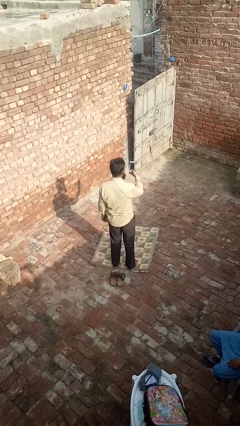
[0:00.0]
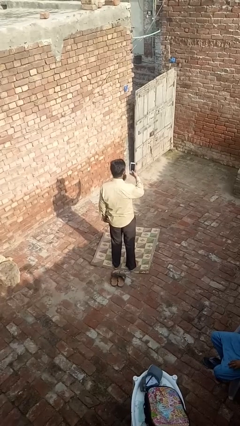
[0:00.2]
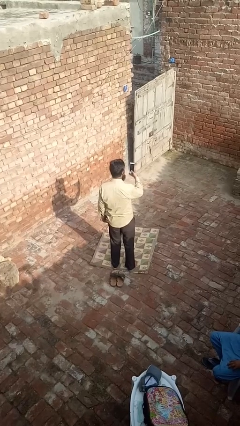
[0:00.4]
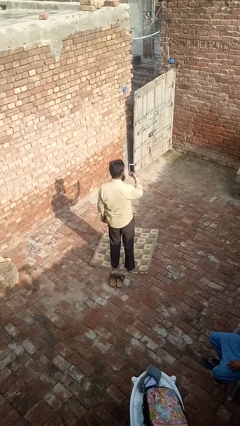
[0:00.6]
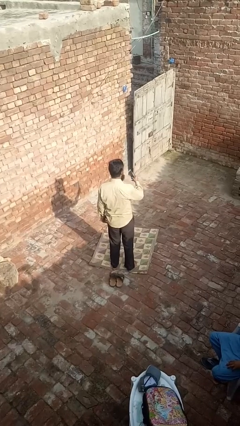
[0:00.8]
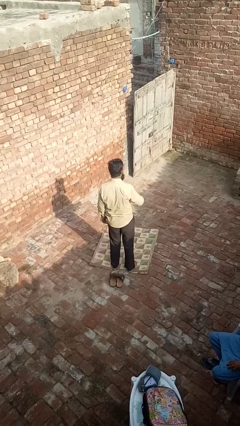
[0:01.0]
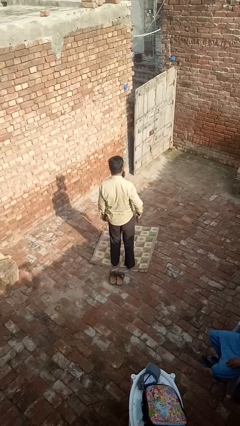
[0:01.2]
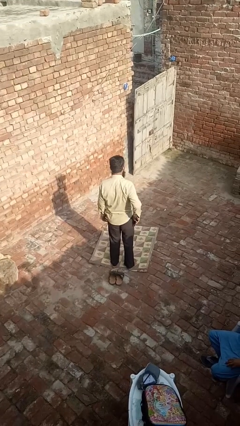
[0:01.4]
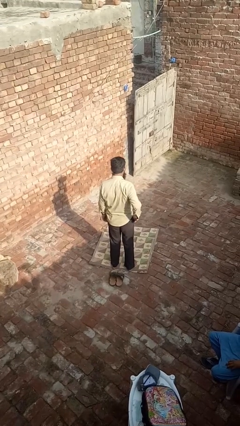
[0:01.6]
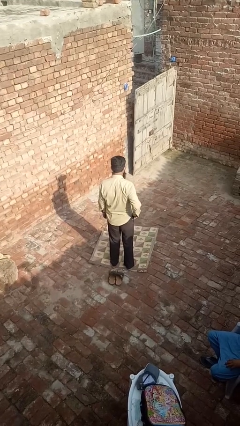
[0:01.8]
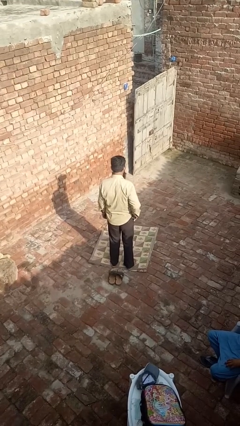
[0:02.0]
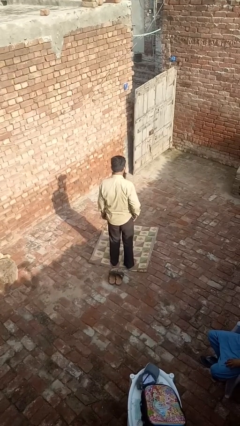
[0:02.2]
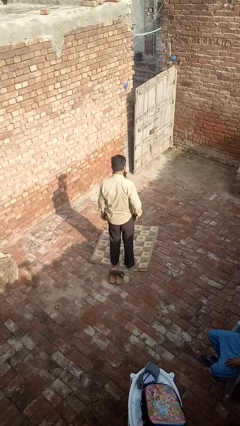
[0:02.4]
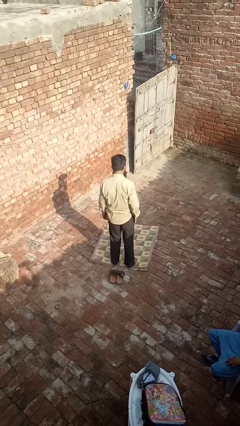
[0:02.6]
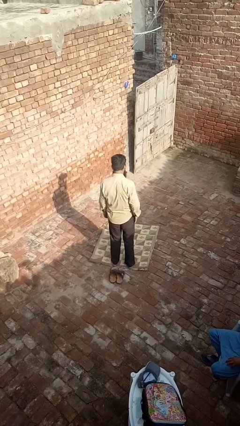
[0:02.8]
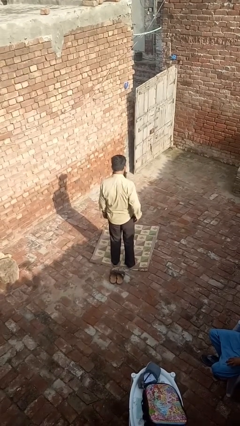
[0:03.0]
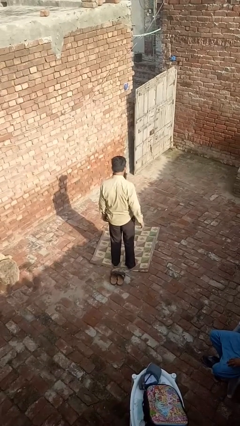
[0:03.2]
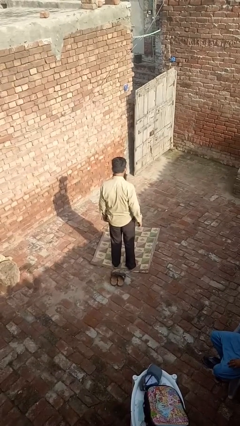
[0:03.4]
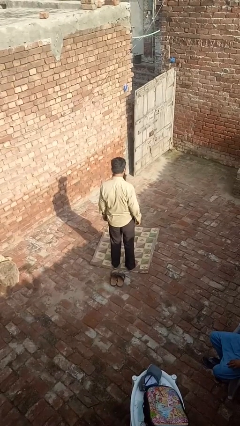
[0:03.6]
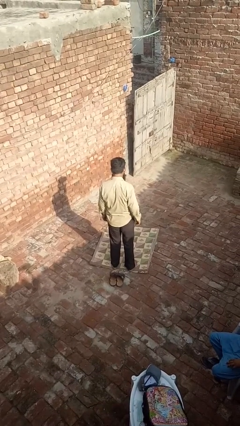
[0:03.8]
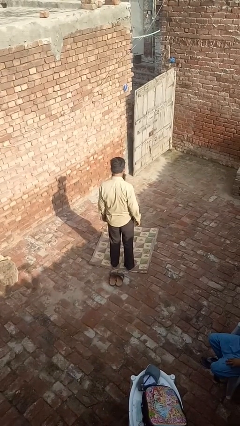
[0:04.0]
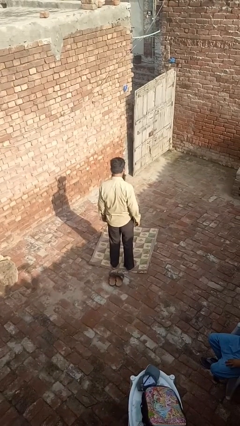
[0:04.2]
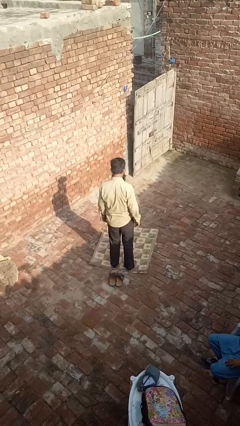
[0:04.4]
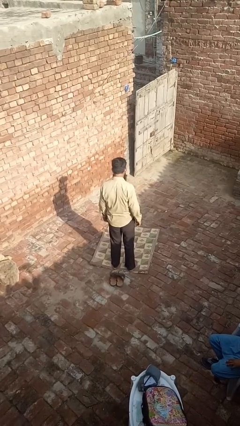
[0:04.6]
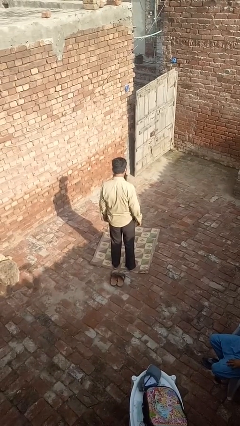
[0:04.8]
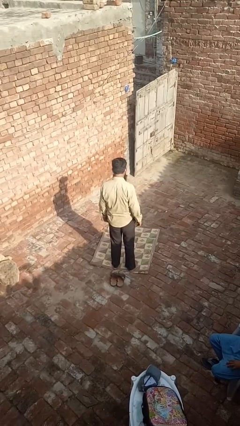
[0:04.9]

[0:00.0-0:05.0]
person puts phone into pocket

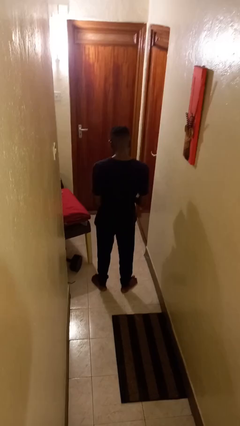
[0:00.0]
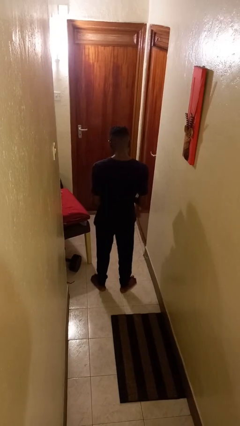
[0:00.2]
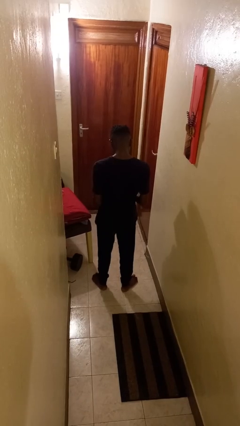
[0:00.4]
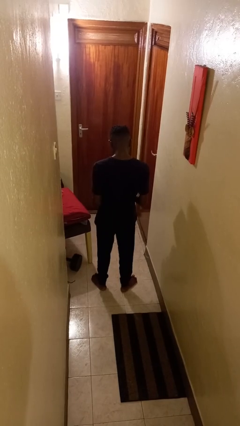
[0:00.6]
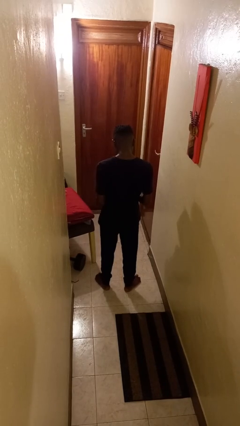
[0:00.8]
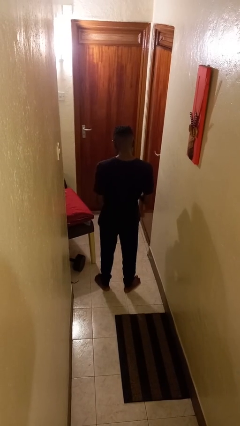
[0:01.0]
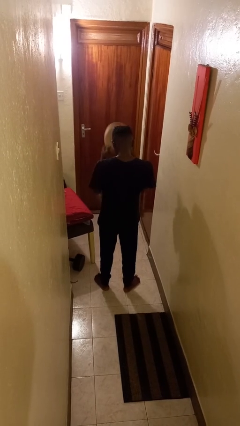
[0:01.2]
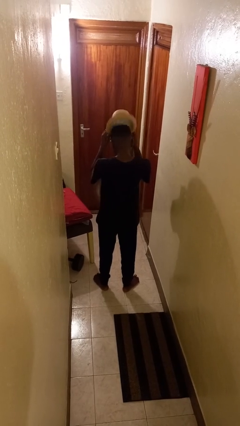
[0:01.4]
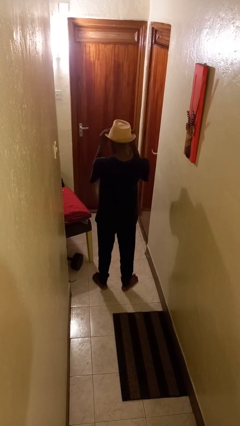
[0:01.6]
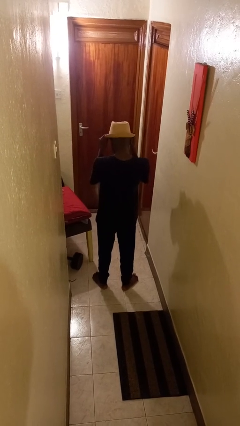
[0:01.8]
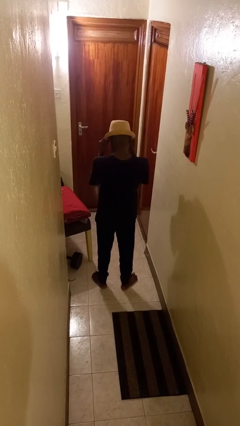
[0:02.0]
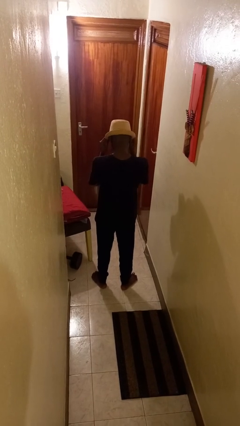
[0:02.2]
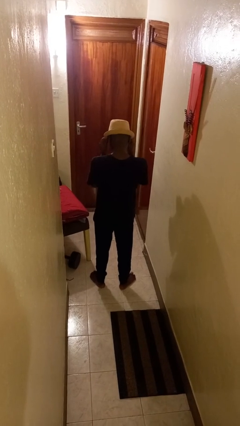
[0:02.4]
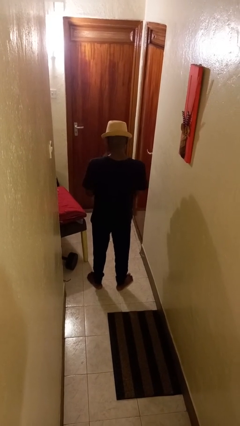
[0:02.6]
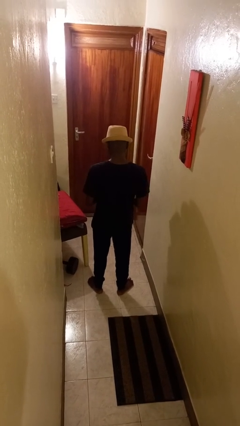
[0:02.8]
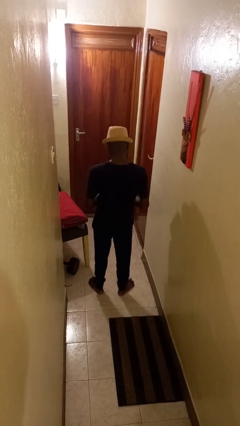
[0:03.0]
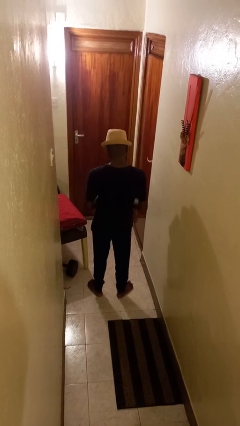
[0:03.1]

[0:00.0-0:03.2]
person puts on hat

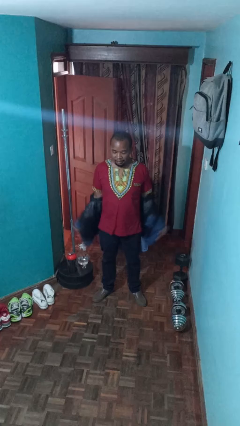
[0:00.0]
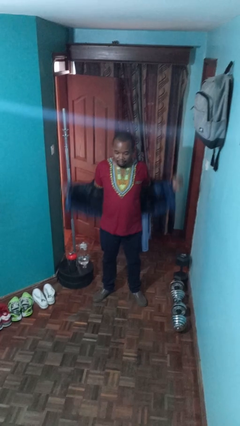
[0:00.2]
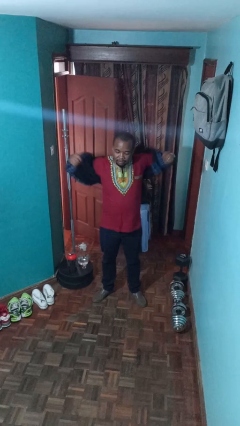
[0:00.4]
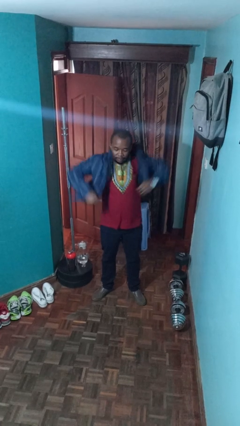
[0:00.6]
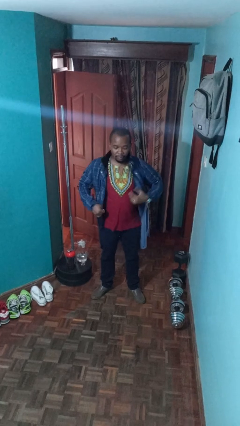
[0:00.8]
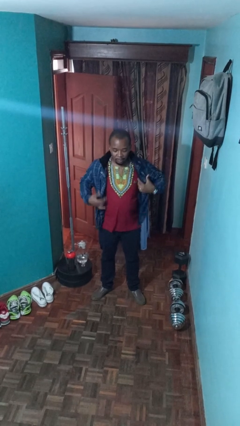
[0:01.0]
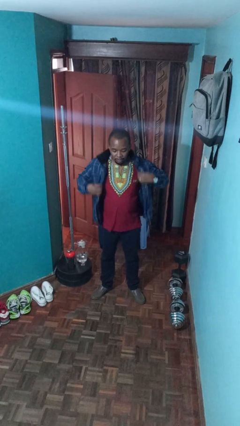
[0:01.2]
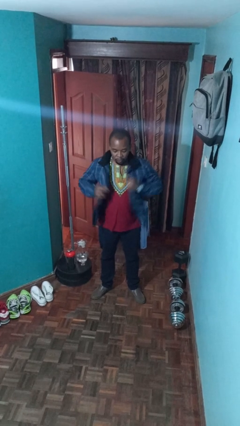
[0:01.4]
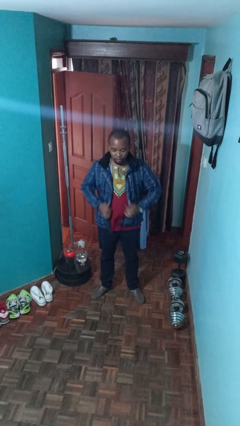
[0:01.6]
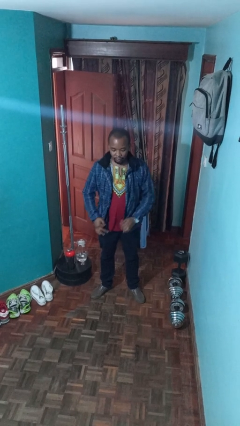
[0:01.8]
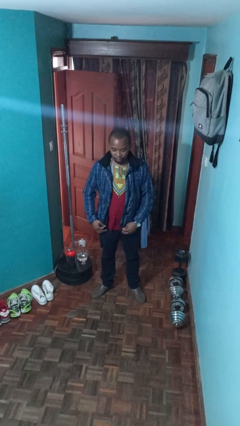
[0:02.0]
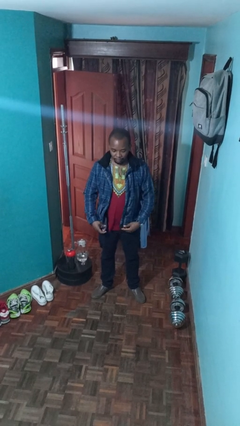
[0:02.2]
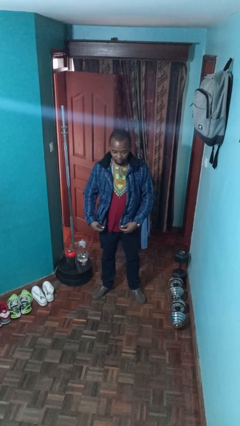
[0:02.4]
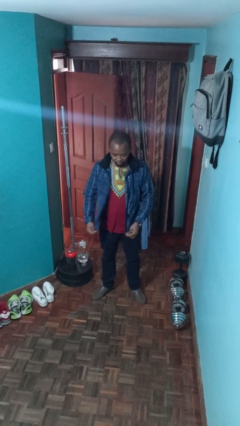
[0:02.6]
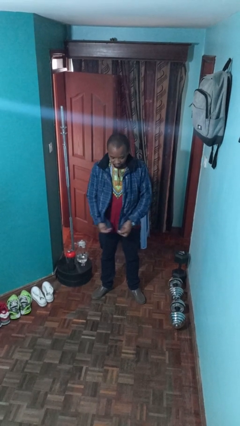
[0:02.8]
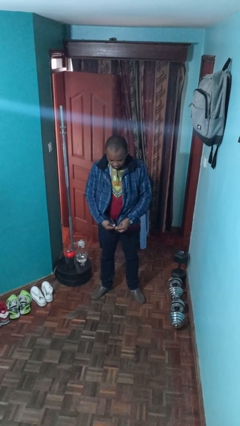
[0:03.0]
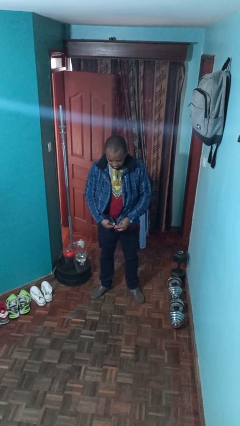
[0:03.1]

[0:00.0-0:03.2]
person puts on jacket

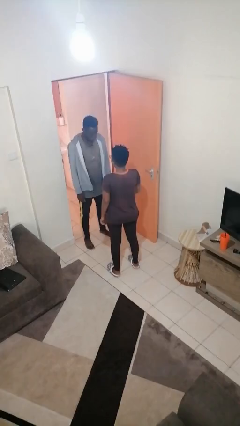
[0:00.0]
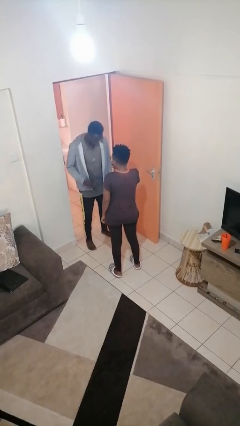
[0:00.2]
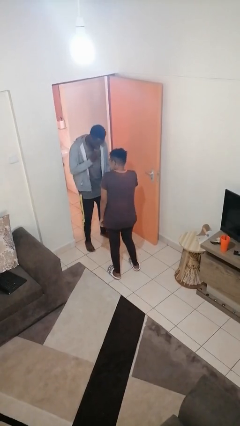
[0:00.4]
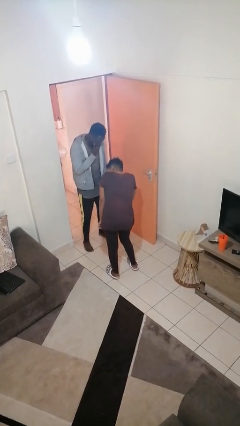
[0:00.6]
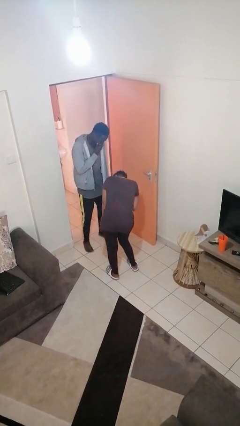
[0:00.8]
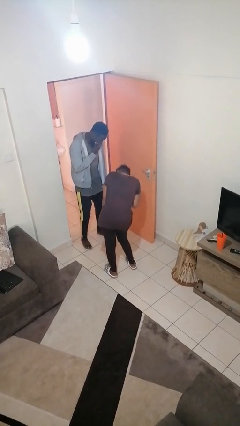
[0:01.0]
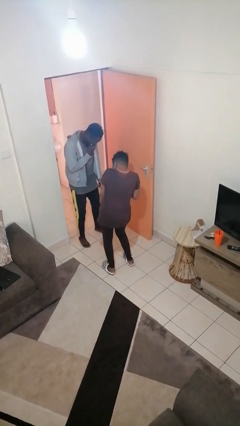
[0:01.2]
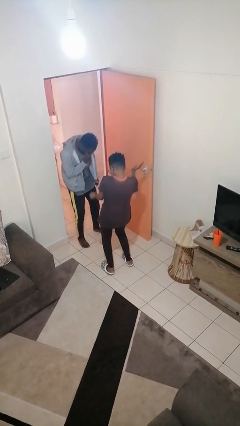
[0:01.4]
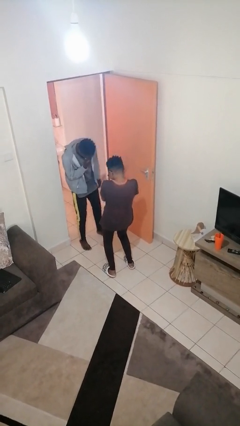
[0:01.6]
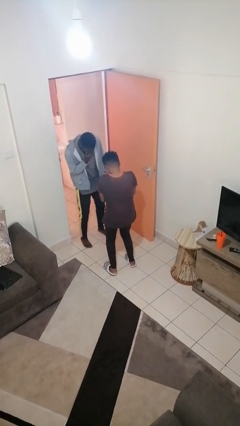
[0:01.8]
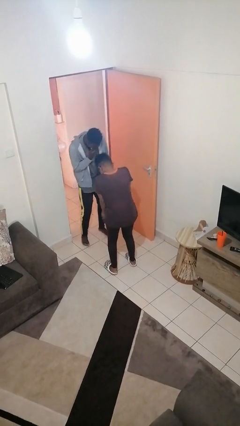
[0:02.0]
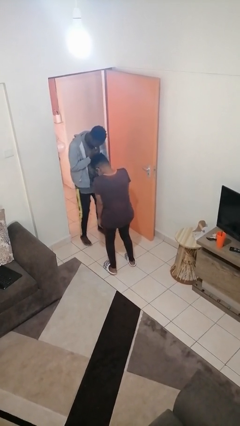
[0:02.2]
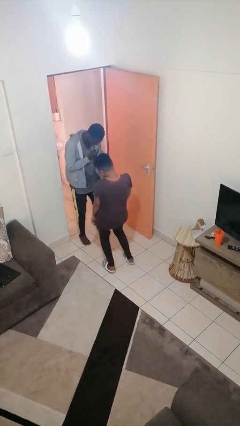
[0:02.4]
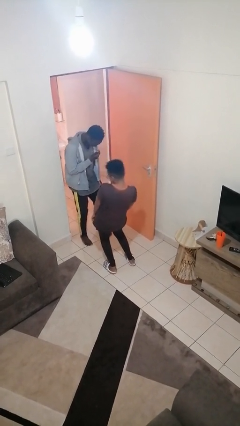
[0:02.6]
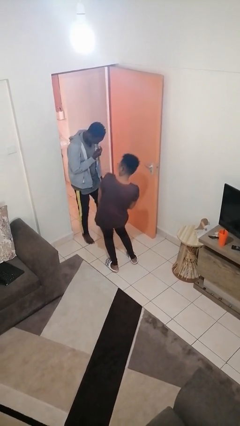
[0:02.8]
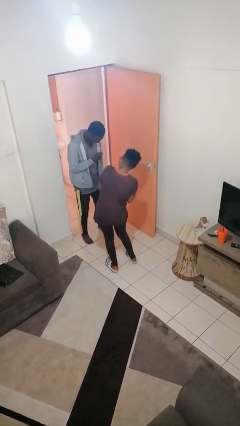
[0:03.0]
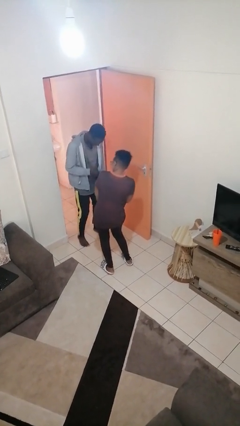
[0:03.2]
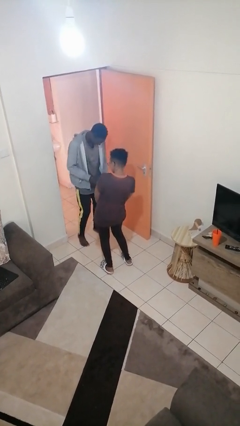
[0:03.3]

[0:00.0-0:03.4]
person laughs with person

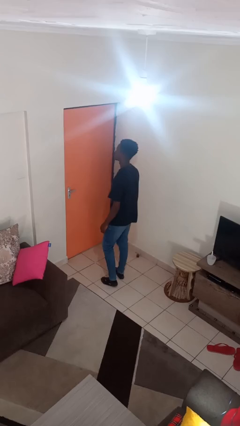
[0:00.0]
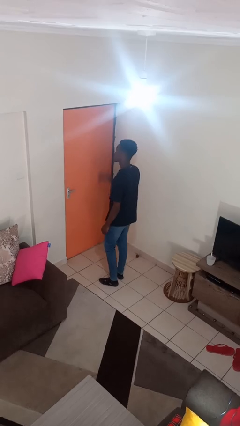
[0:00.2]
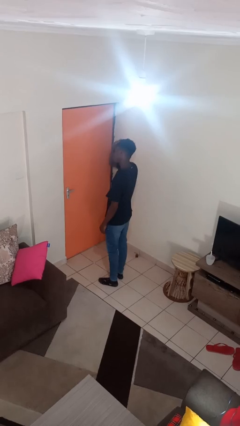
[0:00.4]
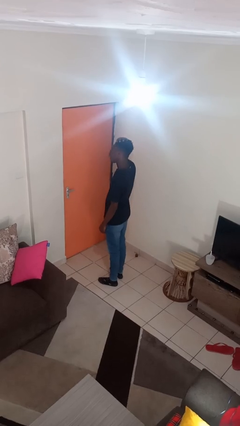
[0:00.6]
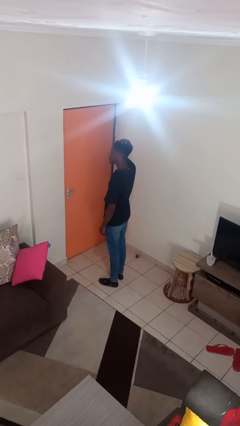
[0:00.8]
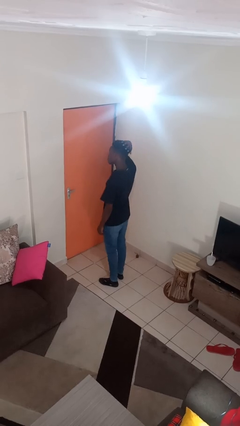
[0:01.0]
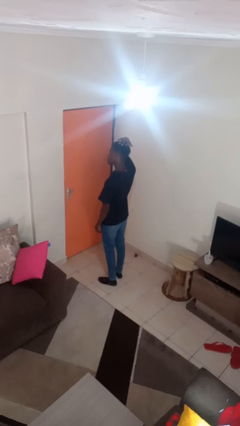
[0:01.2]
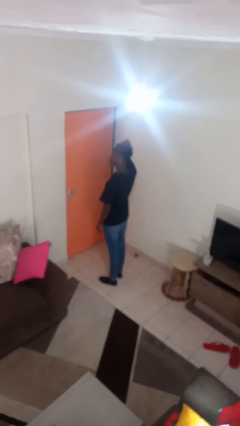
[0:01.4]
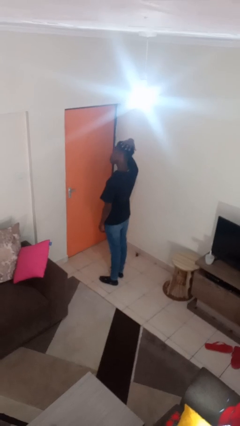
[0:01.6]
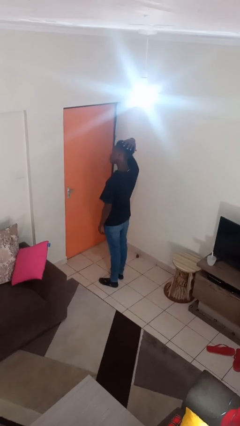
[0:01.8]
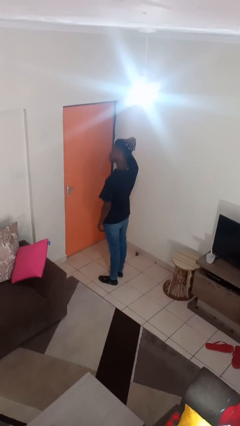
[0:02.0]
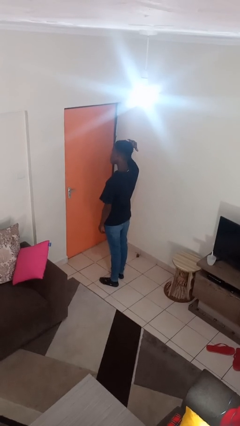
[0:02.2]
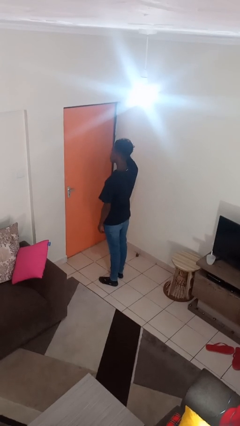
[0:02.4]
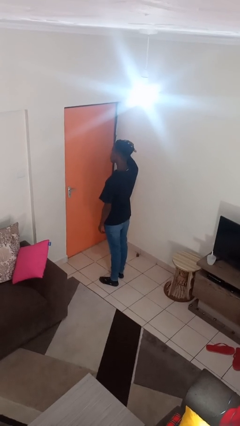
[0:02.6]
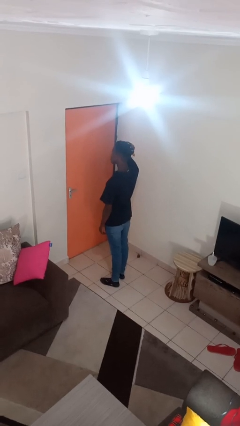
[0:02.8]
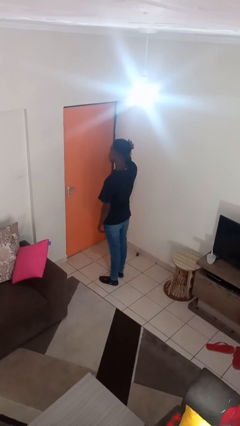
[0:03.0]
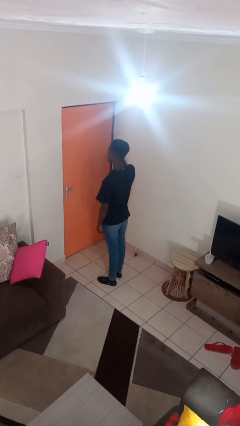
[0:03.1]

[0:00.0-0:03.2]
person strokes hair
